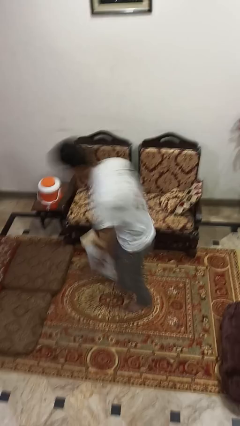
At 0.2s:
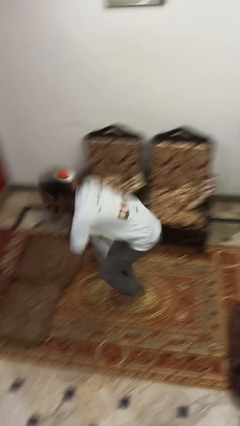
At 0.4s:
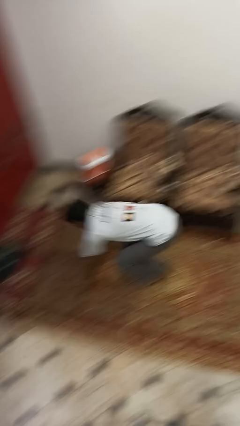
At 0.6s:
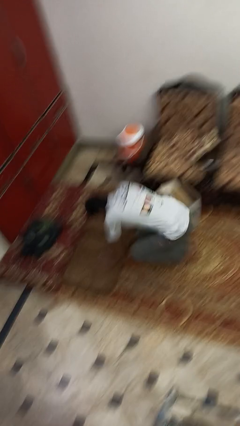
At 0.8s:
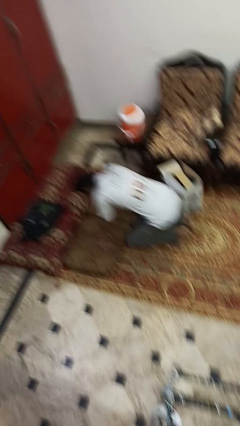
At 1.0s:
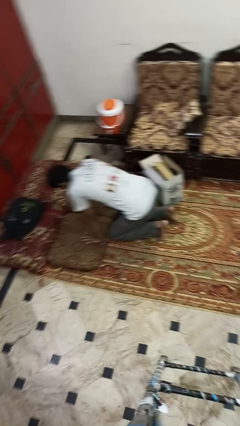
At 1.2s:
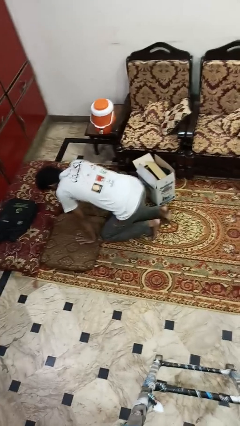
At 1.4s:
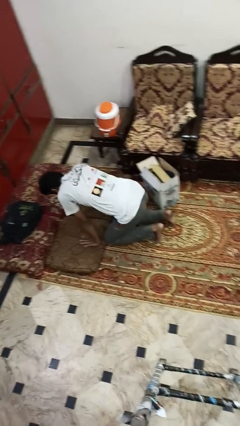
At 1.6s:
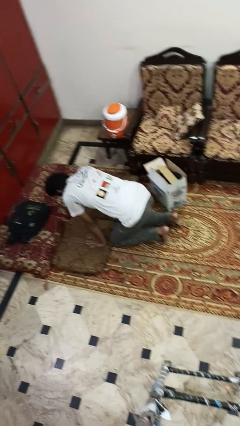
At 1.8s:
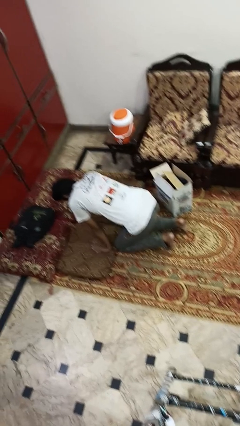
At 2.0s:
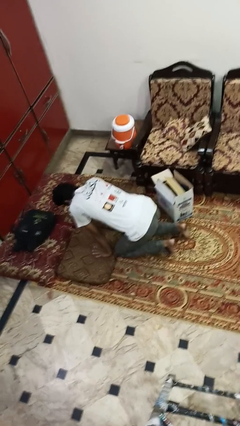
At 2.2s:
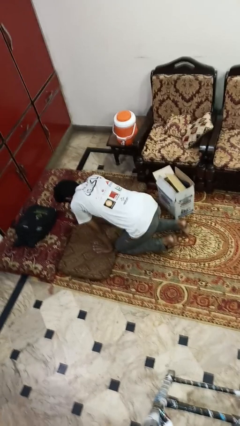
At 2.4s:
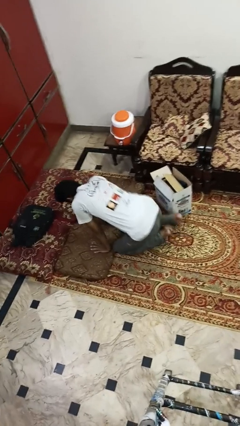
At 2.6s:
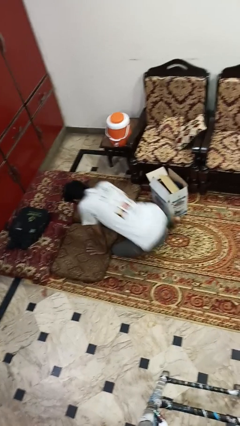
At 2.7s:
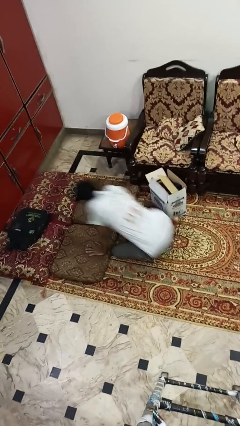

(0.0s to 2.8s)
person trips on object on floor

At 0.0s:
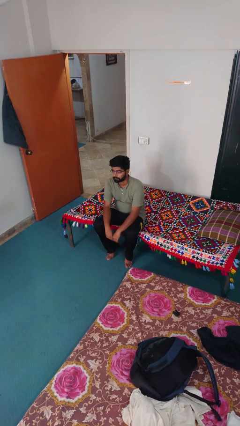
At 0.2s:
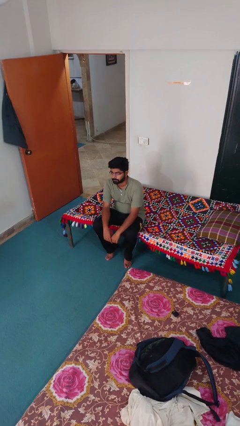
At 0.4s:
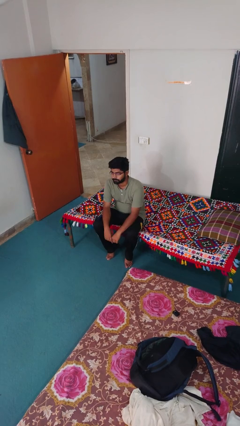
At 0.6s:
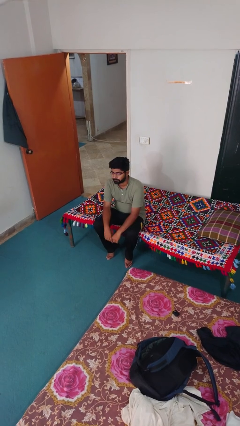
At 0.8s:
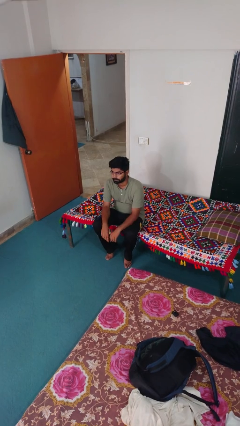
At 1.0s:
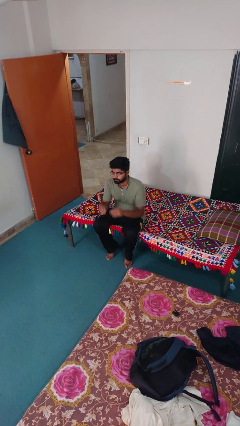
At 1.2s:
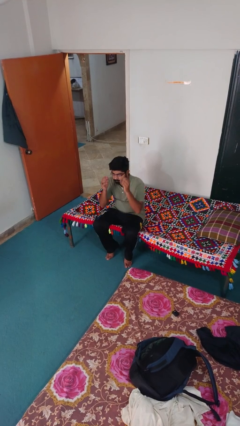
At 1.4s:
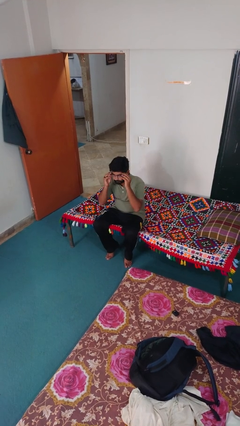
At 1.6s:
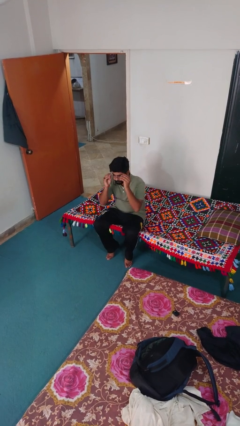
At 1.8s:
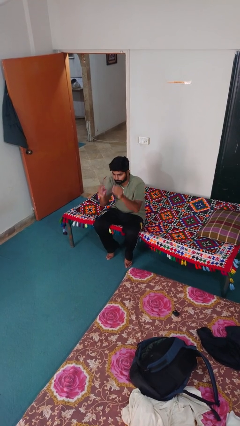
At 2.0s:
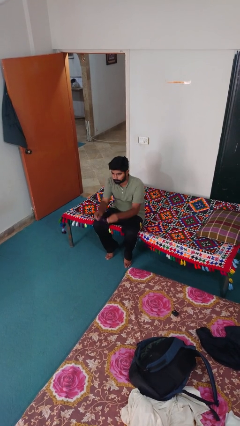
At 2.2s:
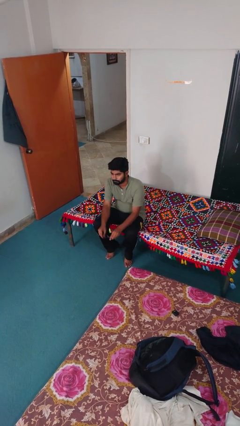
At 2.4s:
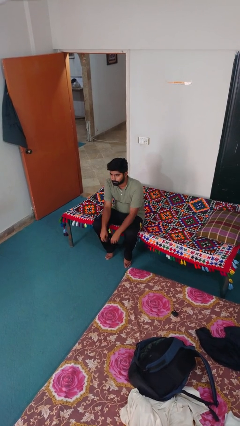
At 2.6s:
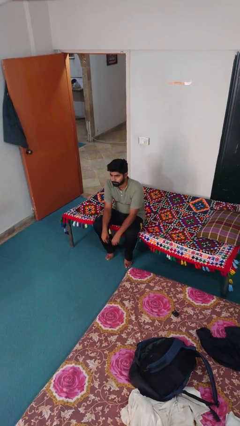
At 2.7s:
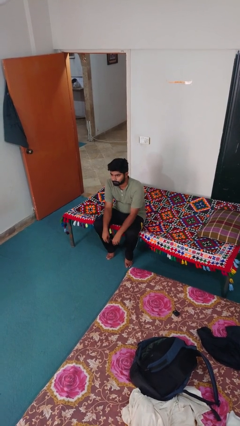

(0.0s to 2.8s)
person takes off glasses

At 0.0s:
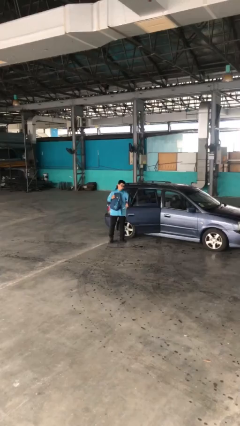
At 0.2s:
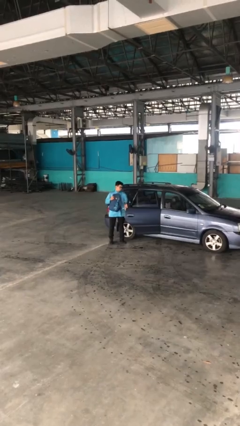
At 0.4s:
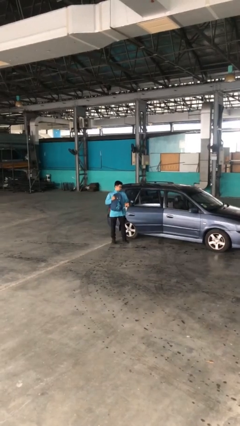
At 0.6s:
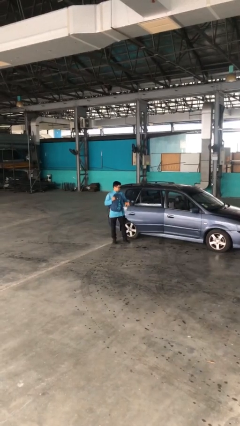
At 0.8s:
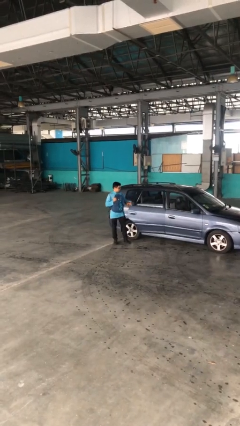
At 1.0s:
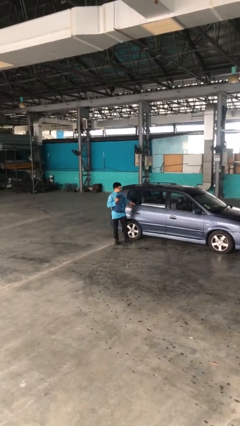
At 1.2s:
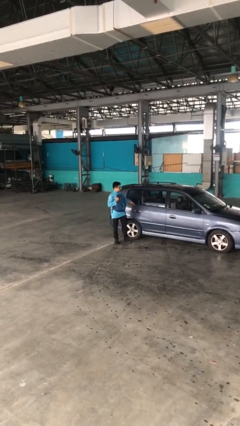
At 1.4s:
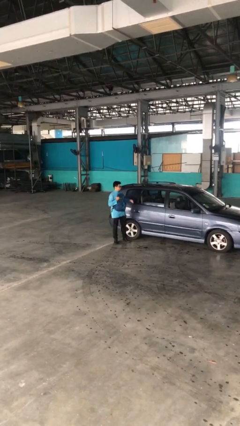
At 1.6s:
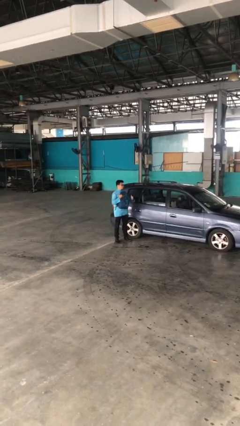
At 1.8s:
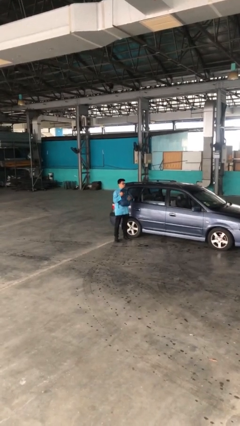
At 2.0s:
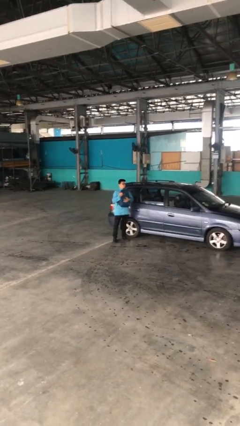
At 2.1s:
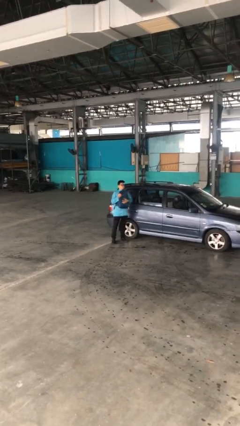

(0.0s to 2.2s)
person closes car door

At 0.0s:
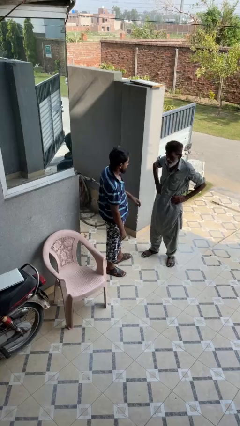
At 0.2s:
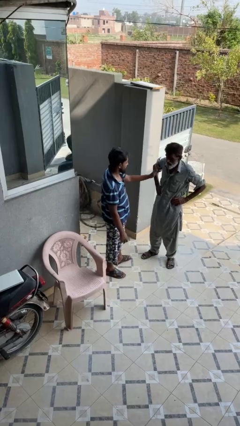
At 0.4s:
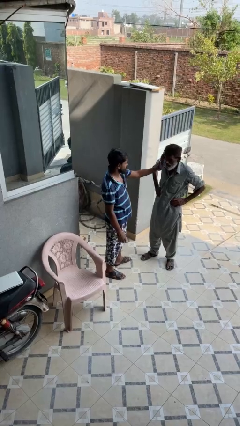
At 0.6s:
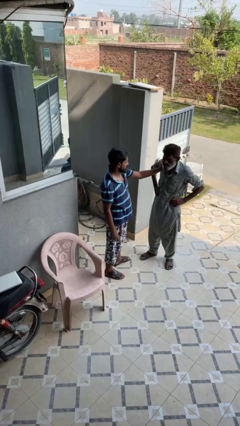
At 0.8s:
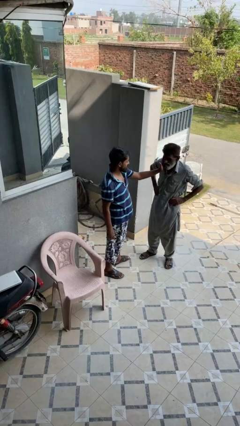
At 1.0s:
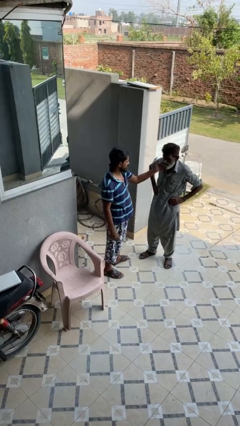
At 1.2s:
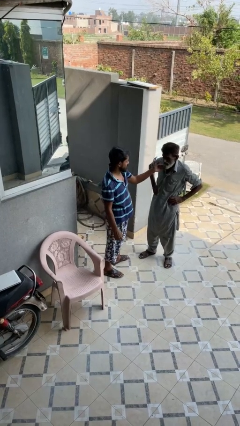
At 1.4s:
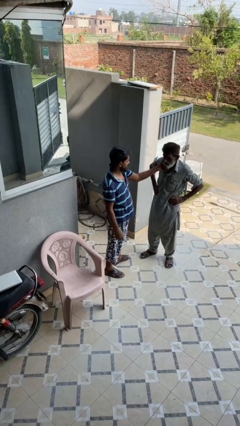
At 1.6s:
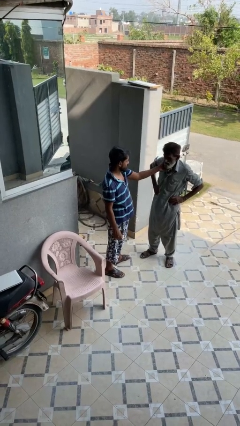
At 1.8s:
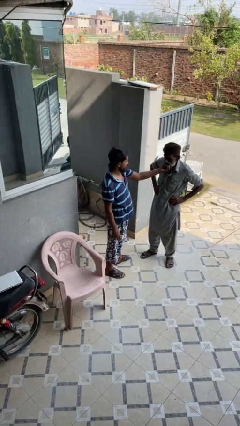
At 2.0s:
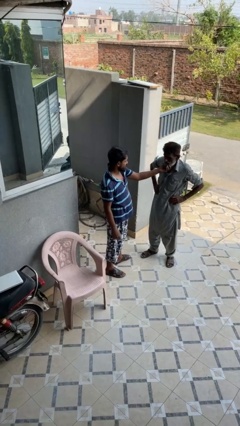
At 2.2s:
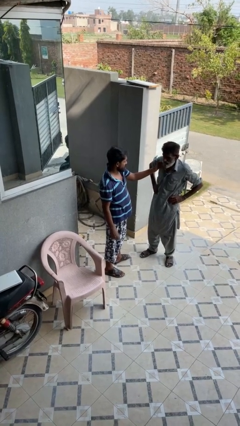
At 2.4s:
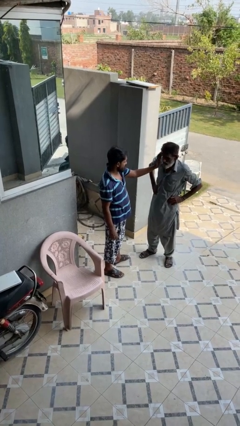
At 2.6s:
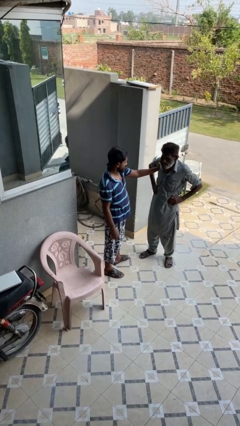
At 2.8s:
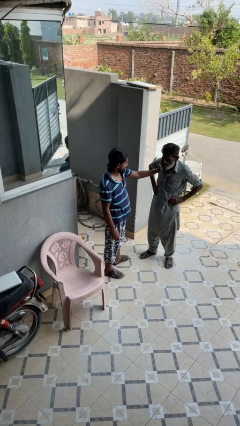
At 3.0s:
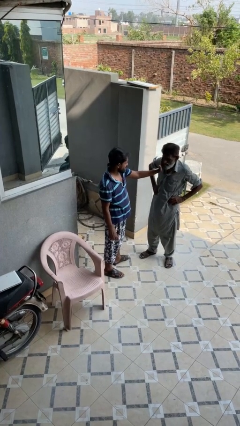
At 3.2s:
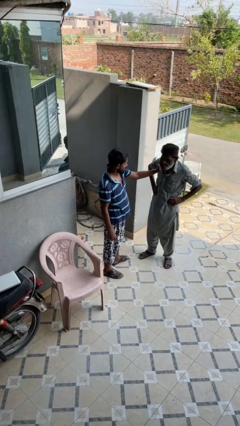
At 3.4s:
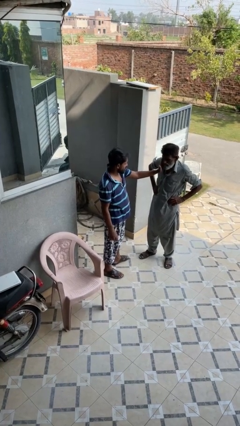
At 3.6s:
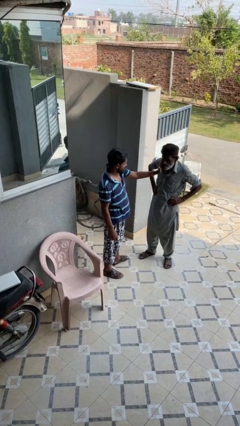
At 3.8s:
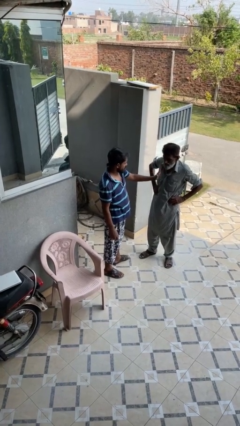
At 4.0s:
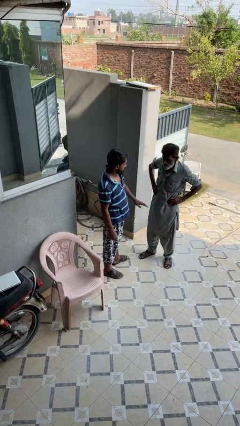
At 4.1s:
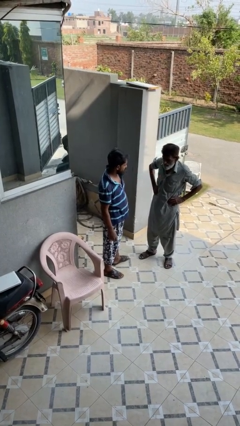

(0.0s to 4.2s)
person touches face of person

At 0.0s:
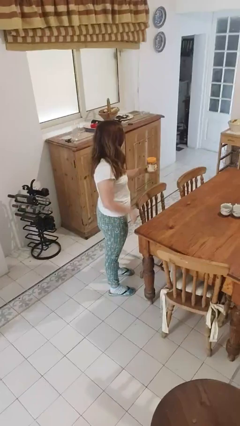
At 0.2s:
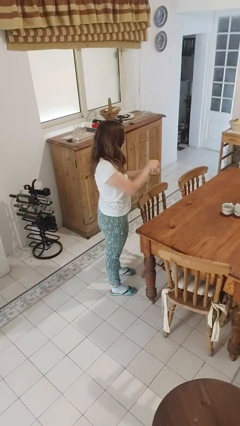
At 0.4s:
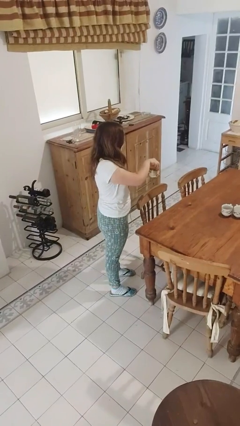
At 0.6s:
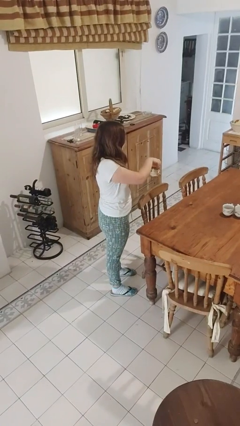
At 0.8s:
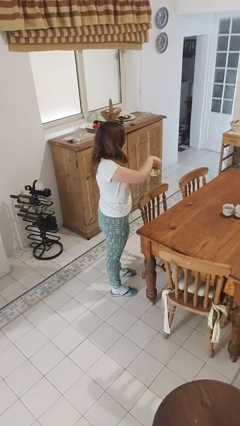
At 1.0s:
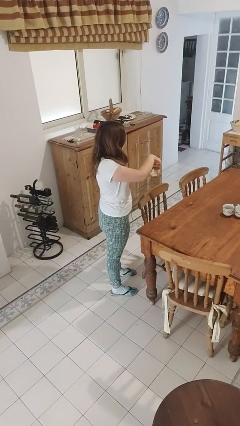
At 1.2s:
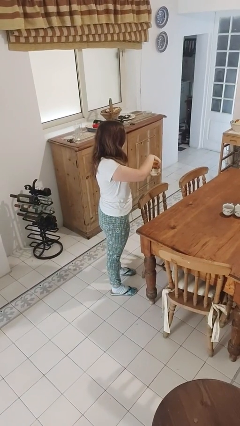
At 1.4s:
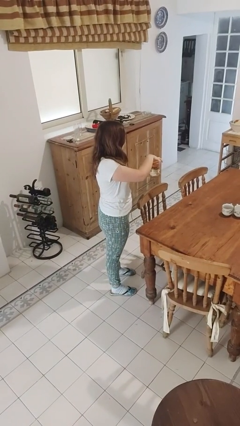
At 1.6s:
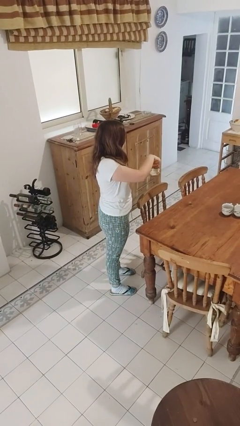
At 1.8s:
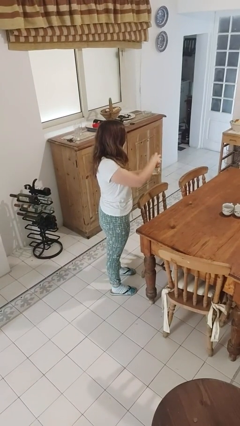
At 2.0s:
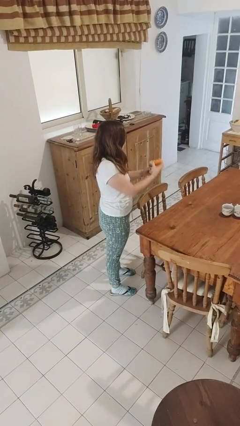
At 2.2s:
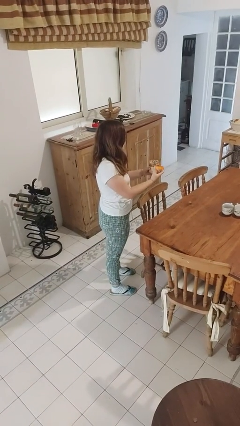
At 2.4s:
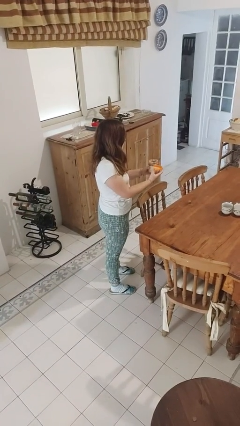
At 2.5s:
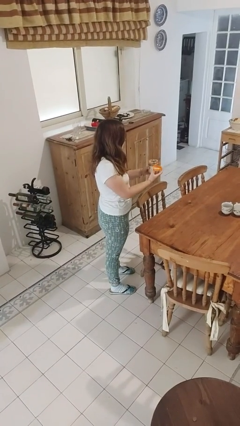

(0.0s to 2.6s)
person opens jar

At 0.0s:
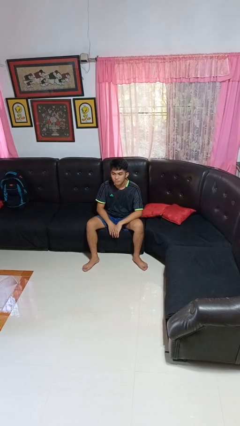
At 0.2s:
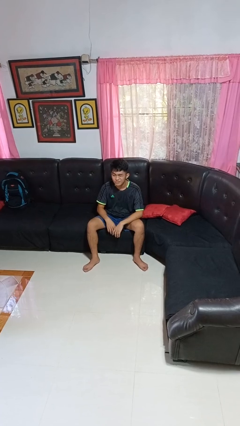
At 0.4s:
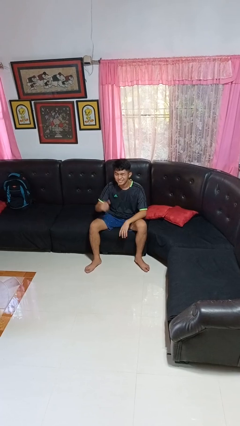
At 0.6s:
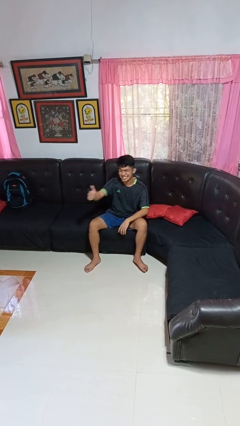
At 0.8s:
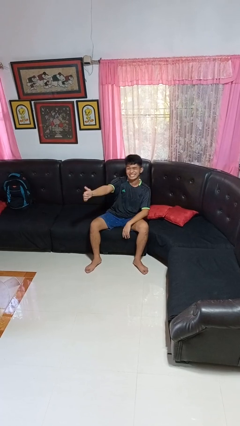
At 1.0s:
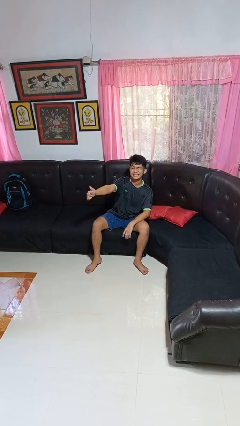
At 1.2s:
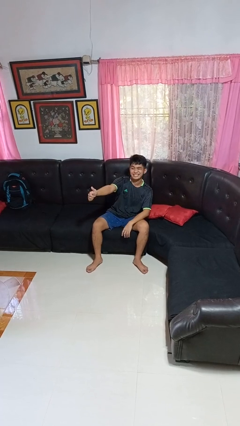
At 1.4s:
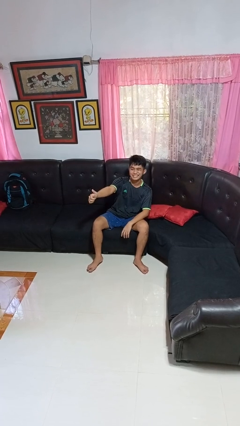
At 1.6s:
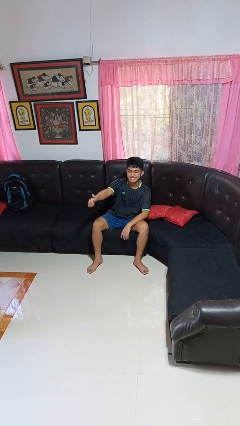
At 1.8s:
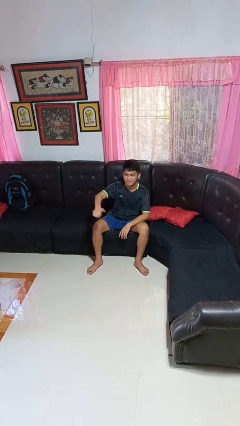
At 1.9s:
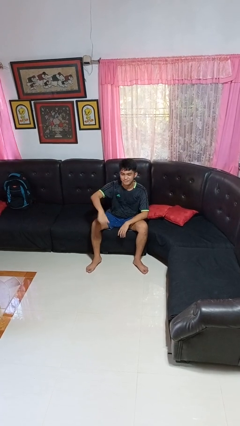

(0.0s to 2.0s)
person gestures thumbs up

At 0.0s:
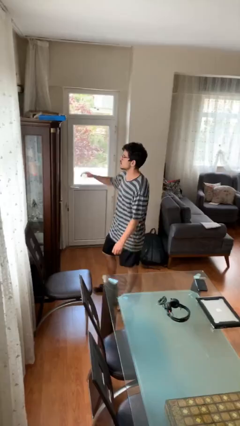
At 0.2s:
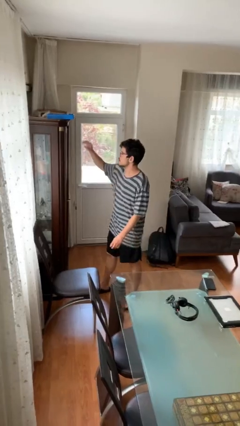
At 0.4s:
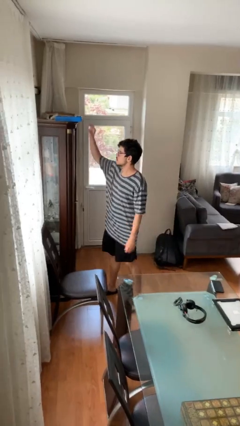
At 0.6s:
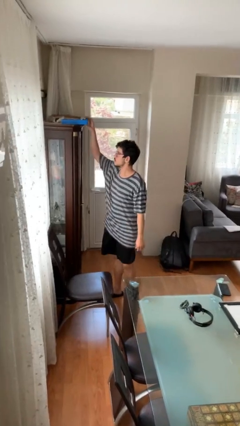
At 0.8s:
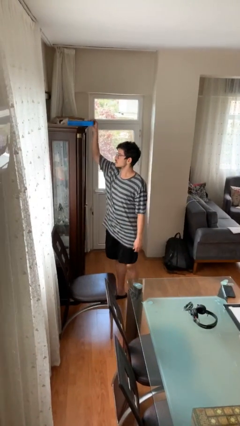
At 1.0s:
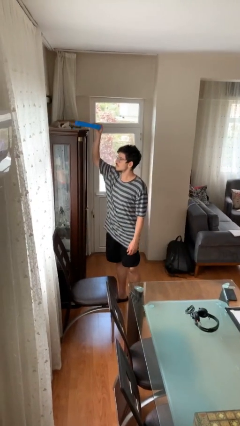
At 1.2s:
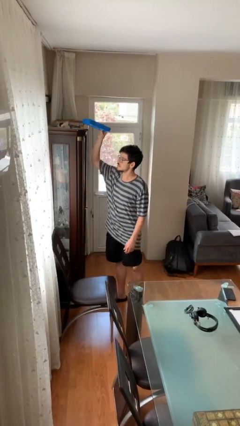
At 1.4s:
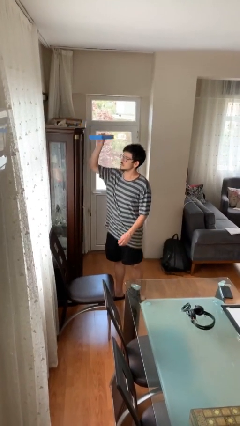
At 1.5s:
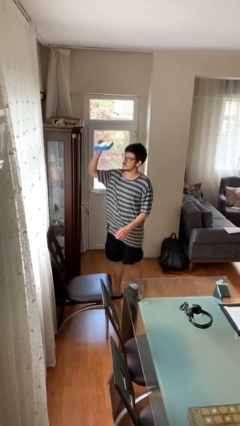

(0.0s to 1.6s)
person picks up object from shelf
